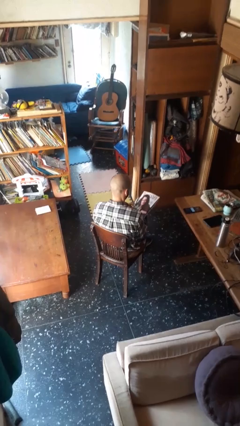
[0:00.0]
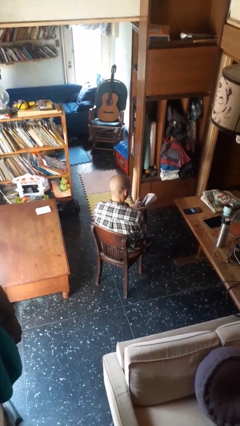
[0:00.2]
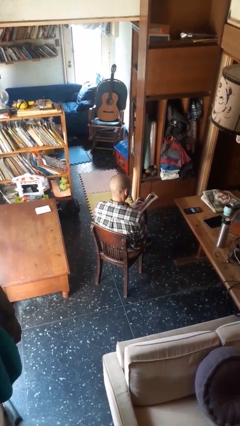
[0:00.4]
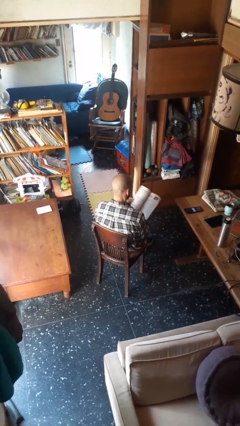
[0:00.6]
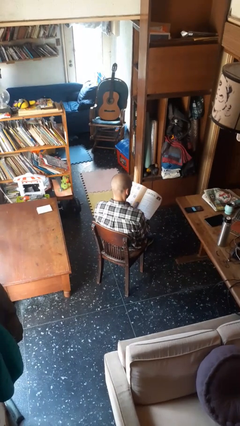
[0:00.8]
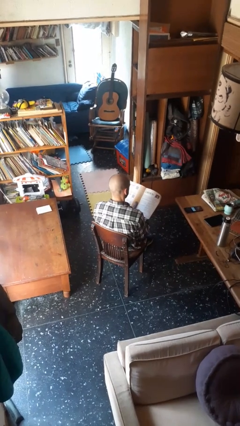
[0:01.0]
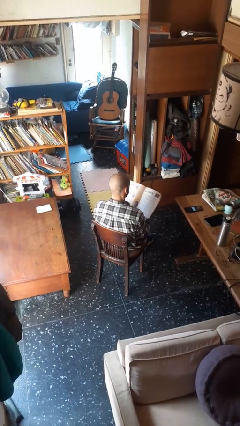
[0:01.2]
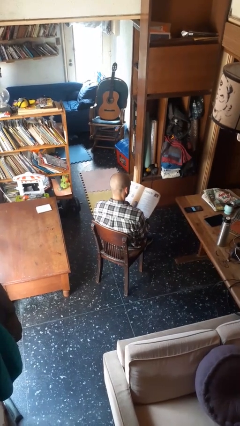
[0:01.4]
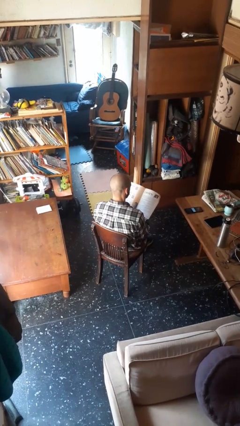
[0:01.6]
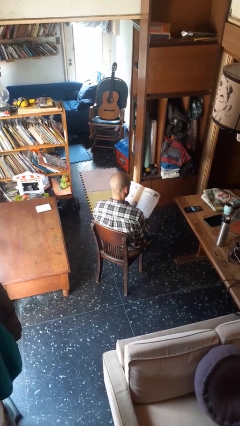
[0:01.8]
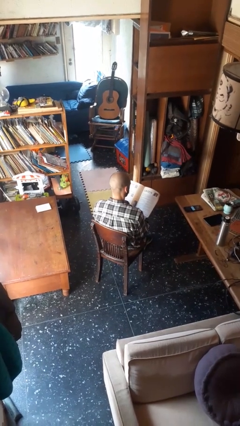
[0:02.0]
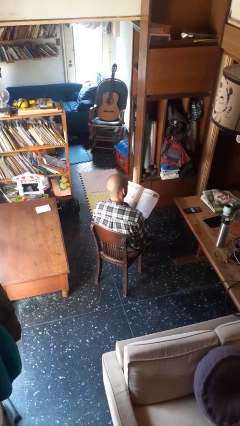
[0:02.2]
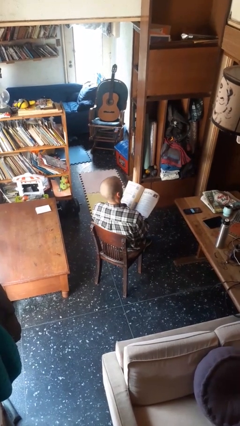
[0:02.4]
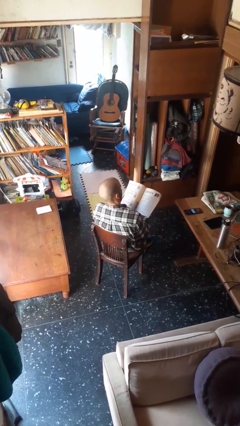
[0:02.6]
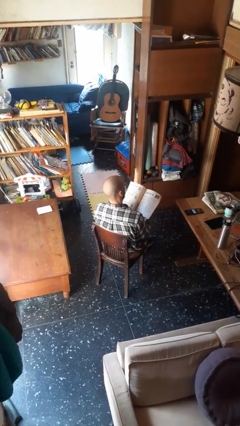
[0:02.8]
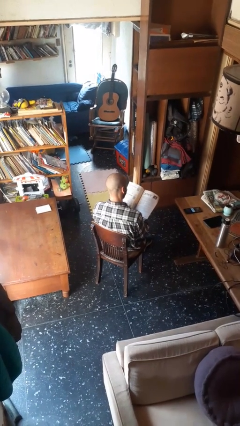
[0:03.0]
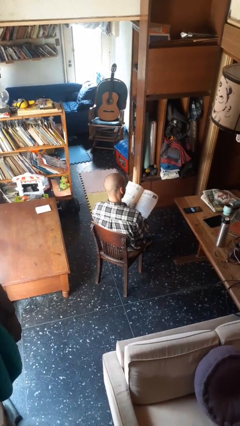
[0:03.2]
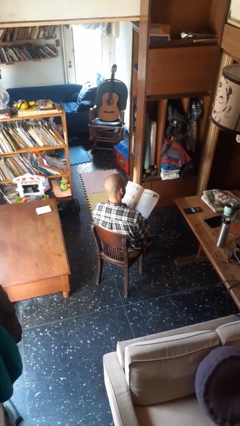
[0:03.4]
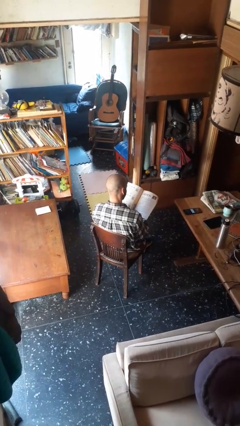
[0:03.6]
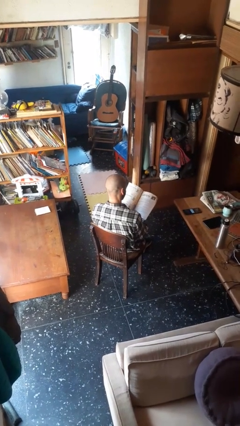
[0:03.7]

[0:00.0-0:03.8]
person reads magazine

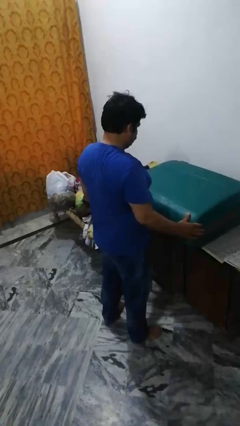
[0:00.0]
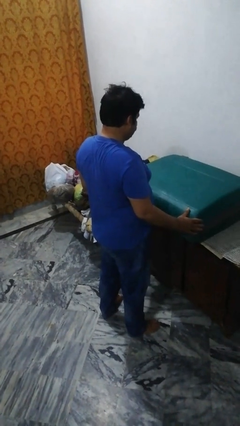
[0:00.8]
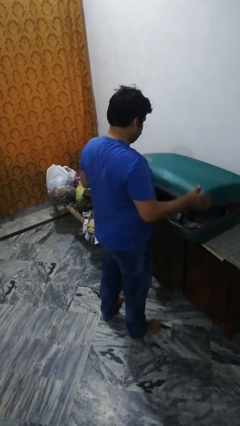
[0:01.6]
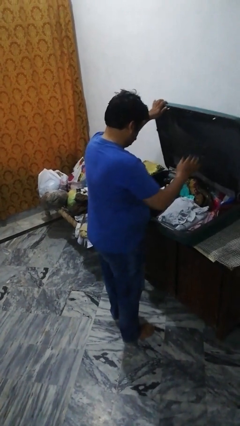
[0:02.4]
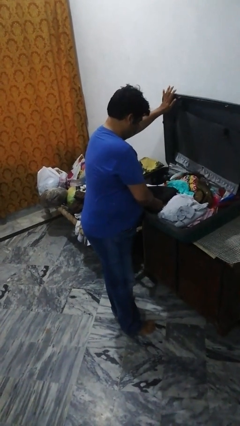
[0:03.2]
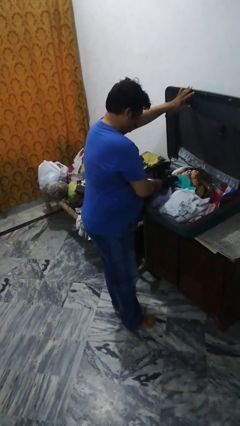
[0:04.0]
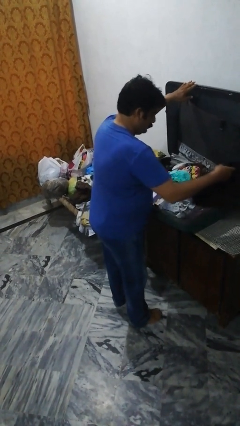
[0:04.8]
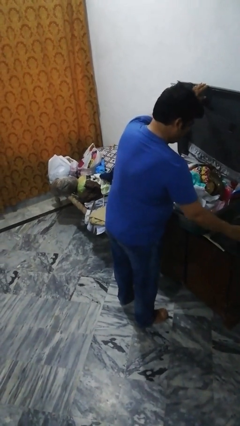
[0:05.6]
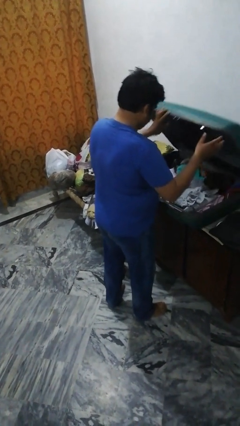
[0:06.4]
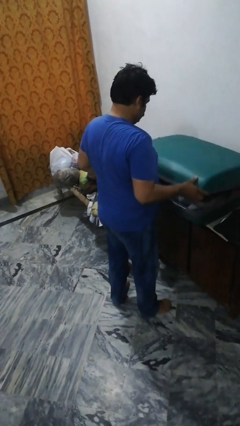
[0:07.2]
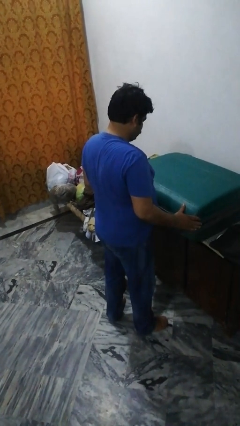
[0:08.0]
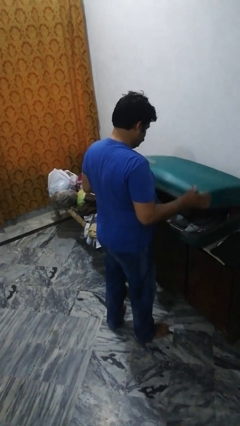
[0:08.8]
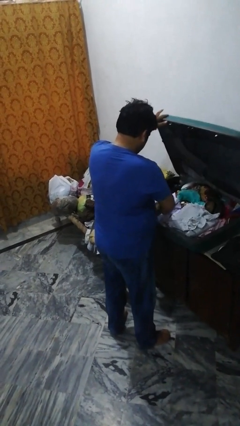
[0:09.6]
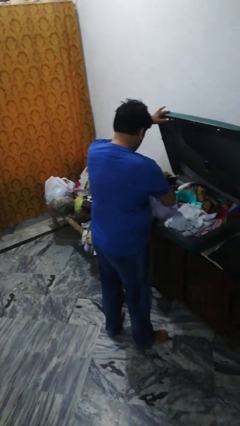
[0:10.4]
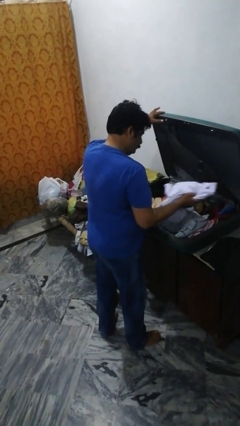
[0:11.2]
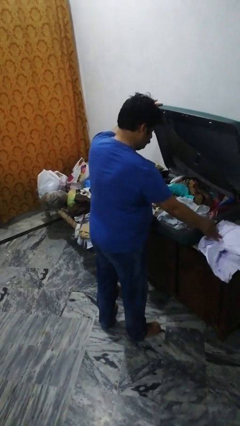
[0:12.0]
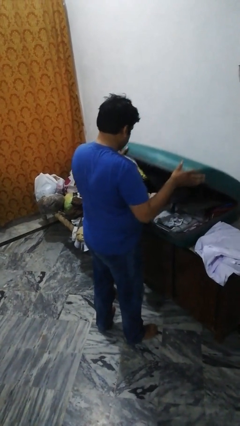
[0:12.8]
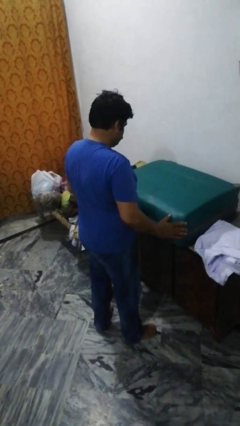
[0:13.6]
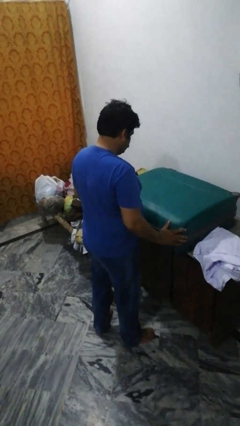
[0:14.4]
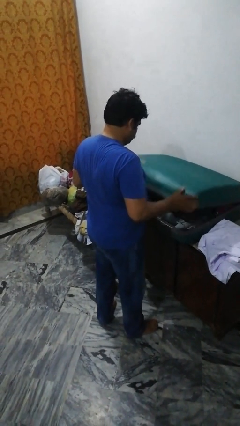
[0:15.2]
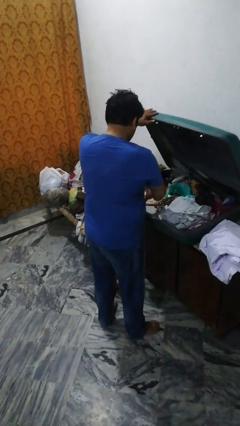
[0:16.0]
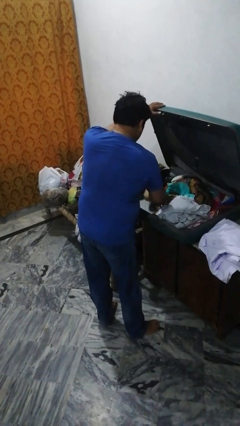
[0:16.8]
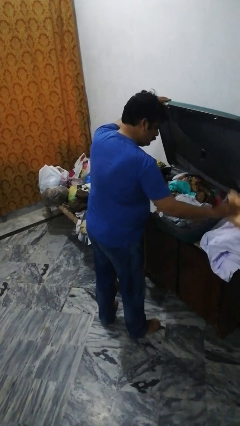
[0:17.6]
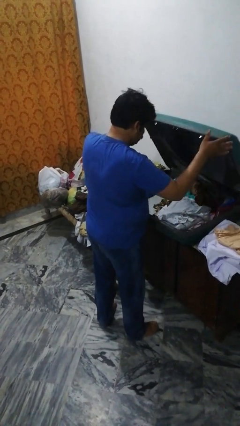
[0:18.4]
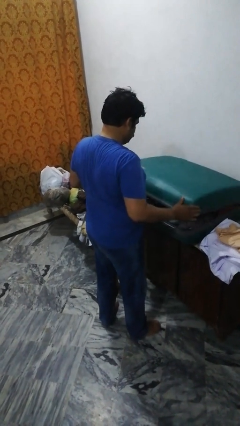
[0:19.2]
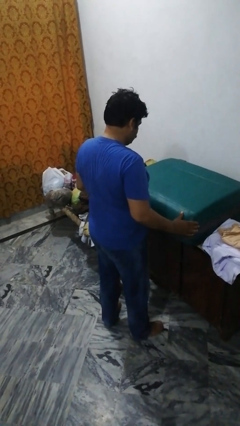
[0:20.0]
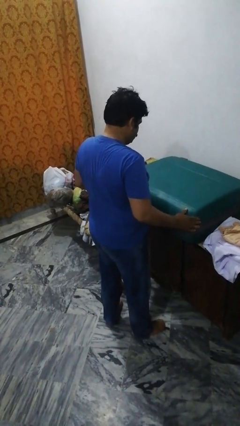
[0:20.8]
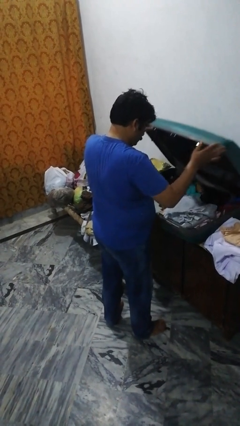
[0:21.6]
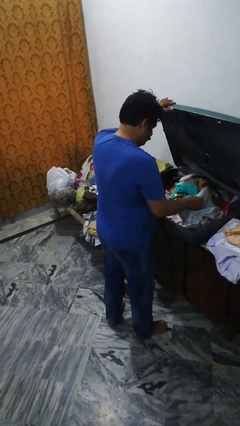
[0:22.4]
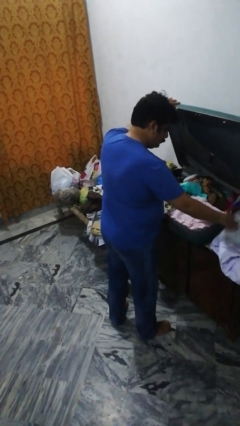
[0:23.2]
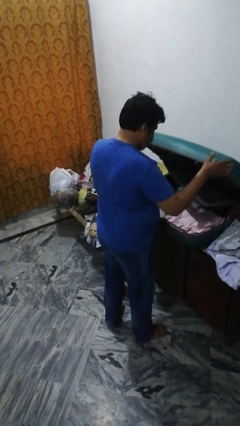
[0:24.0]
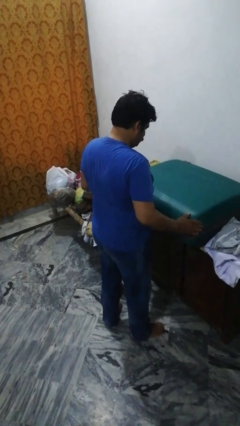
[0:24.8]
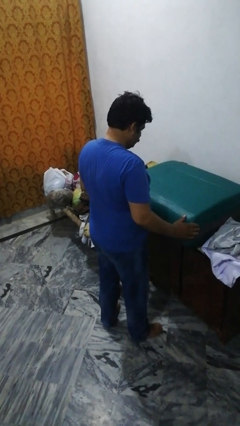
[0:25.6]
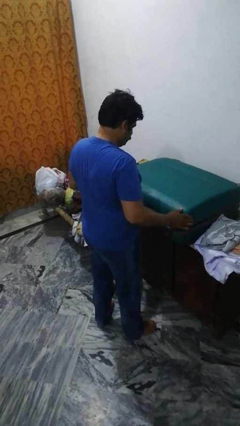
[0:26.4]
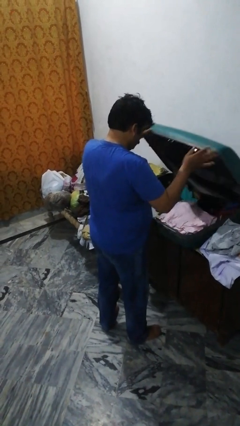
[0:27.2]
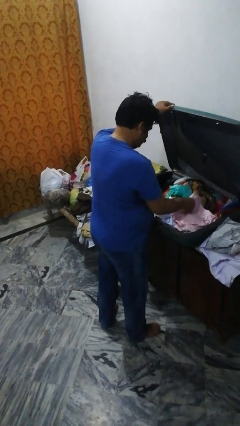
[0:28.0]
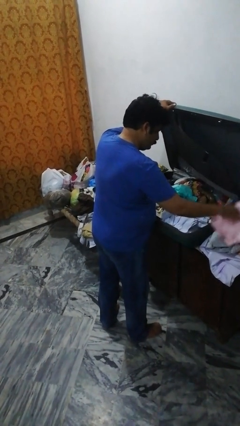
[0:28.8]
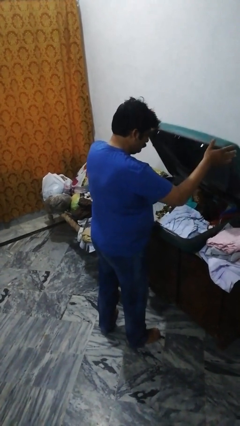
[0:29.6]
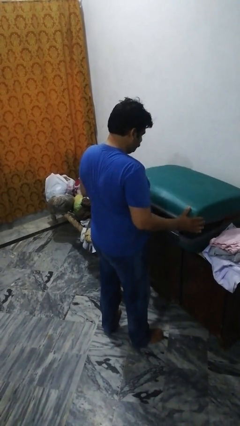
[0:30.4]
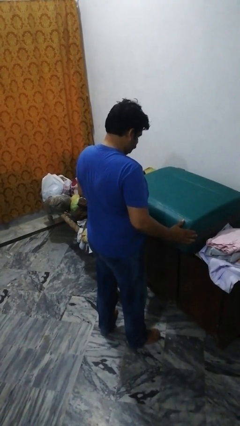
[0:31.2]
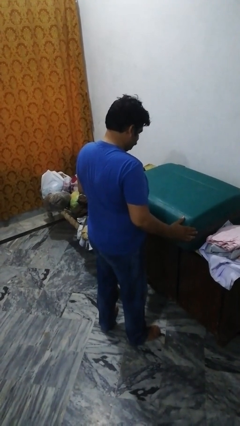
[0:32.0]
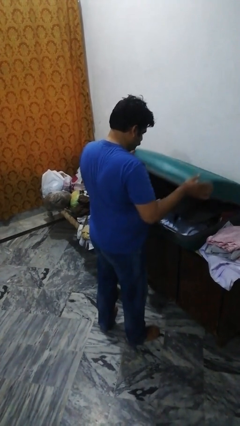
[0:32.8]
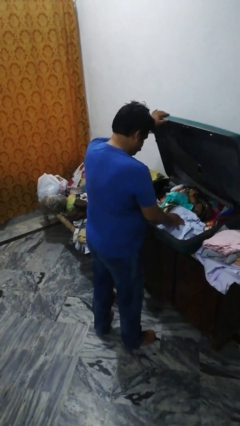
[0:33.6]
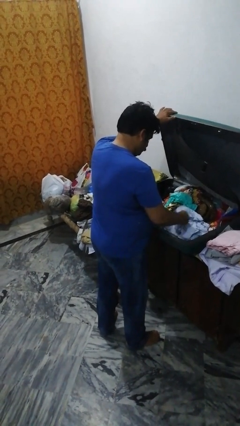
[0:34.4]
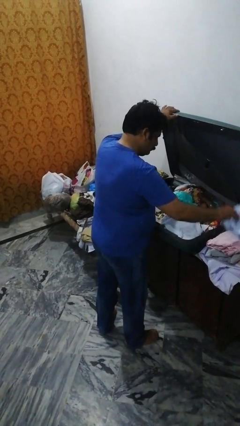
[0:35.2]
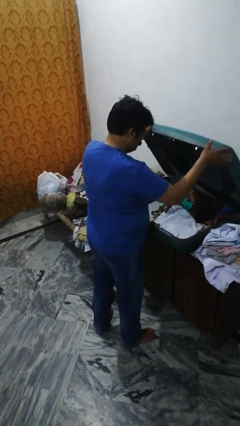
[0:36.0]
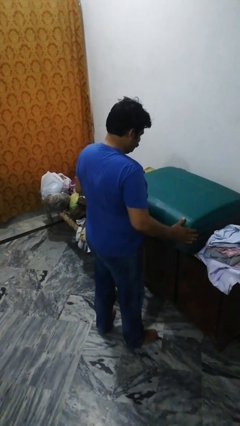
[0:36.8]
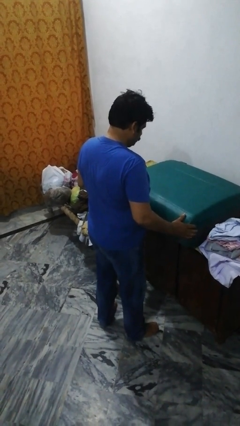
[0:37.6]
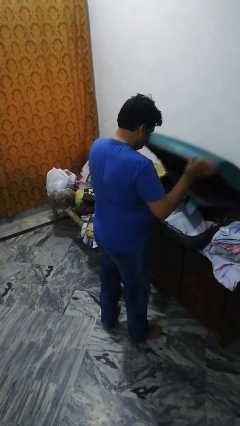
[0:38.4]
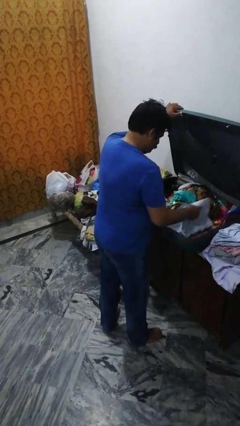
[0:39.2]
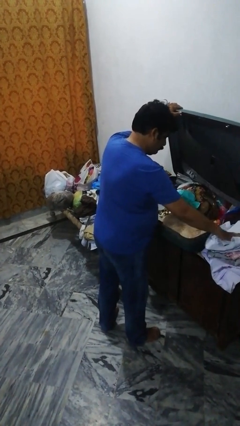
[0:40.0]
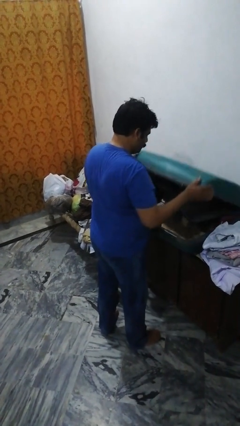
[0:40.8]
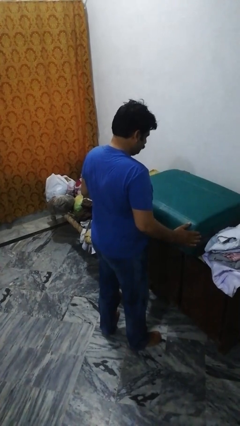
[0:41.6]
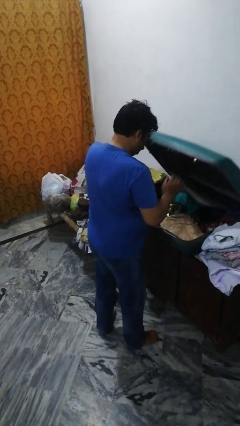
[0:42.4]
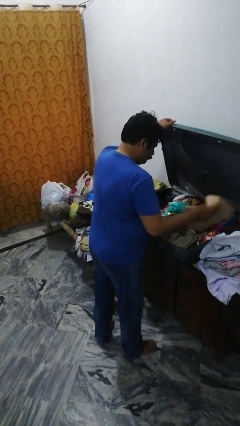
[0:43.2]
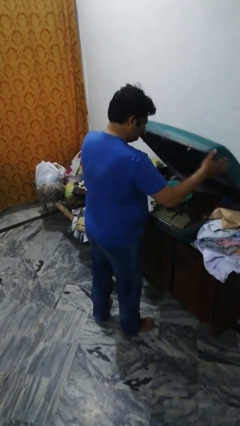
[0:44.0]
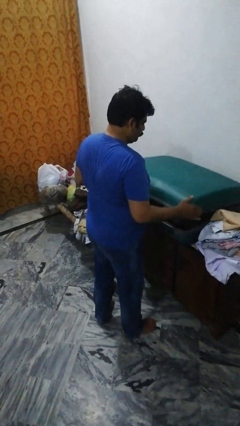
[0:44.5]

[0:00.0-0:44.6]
person unloads clothes from suitcase

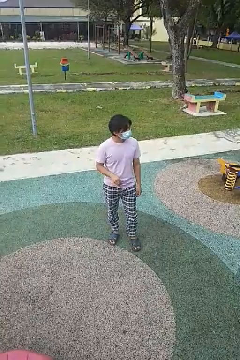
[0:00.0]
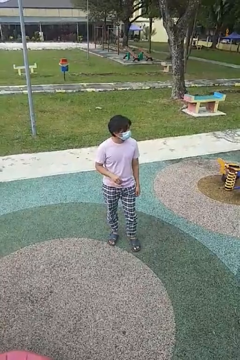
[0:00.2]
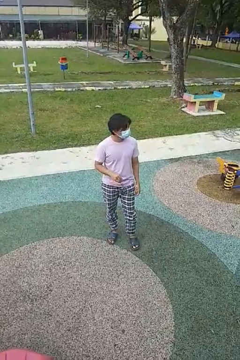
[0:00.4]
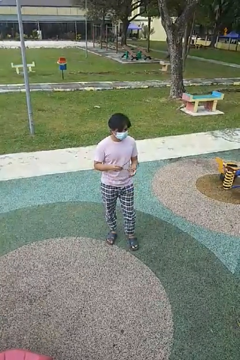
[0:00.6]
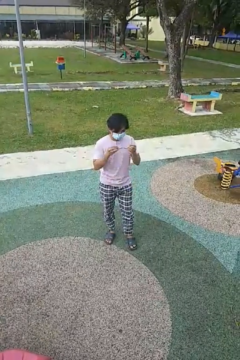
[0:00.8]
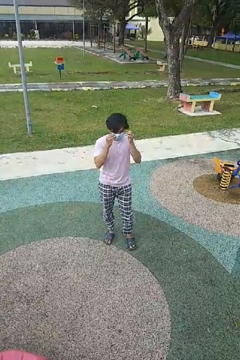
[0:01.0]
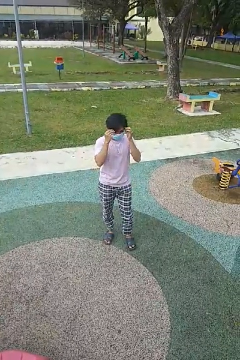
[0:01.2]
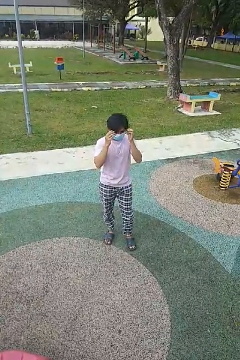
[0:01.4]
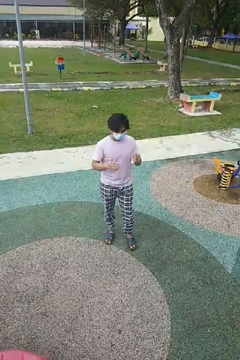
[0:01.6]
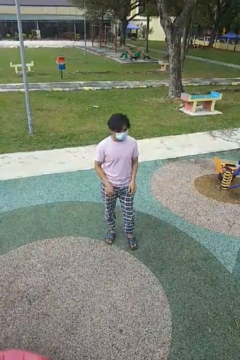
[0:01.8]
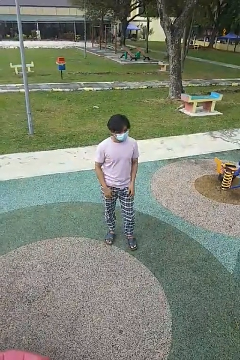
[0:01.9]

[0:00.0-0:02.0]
person puts on glasses

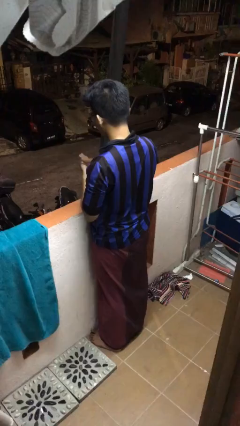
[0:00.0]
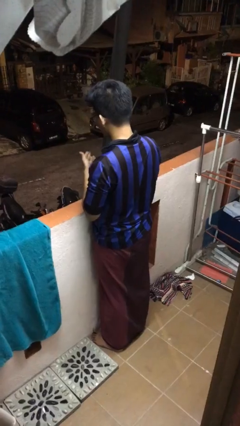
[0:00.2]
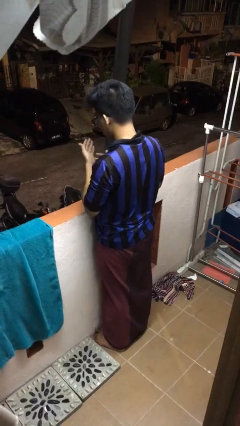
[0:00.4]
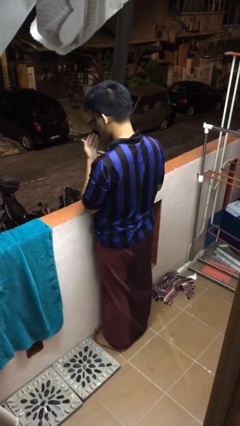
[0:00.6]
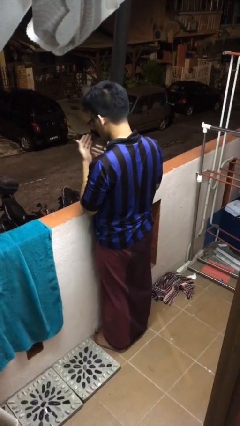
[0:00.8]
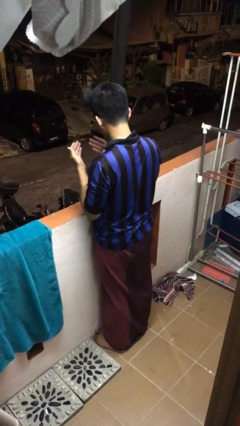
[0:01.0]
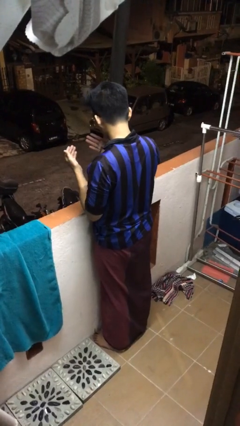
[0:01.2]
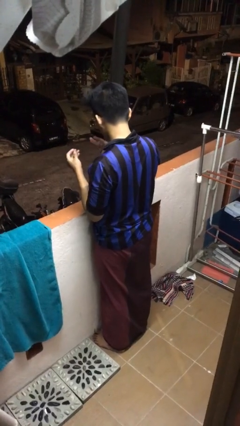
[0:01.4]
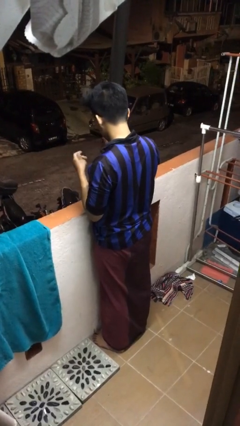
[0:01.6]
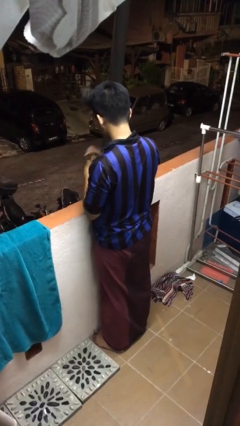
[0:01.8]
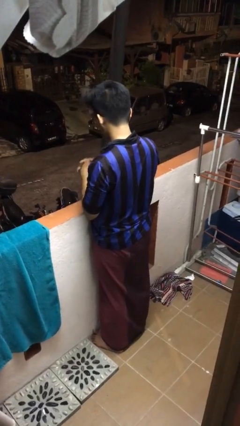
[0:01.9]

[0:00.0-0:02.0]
person blows into hands
